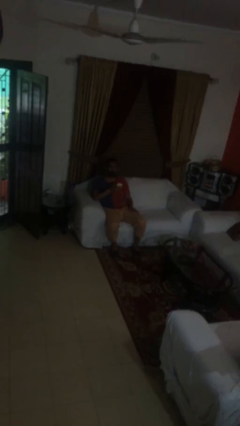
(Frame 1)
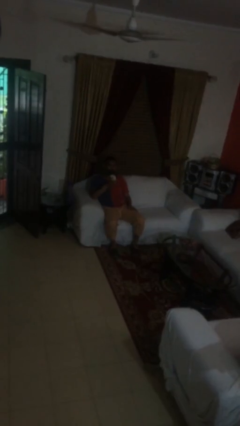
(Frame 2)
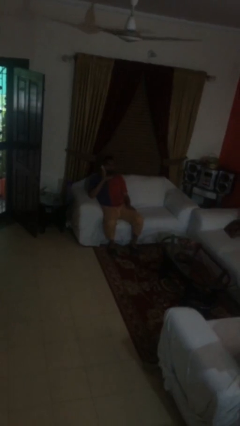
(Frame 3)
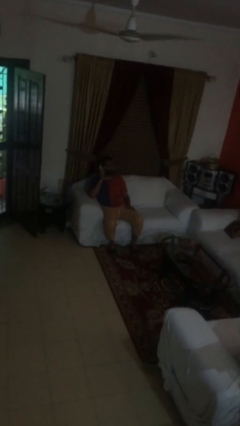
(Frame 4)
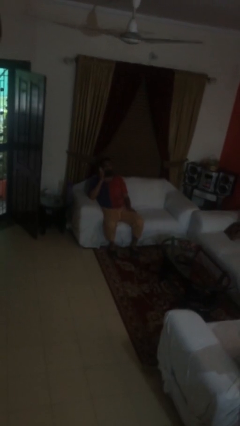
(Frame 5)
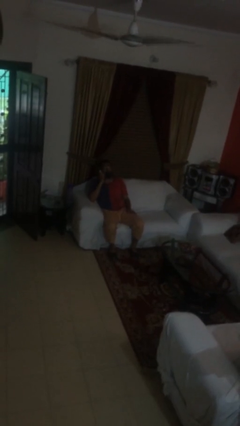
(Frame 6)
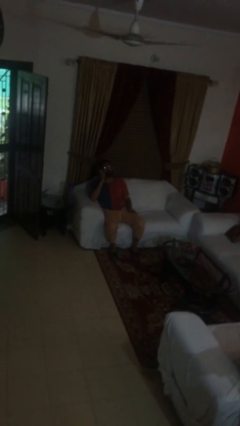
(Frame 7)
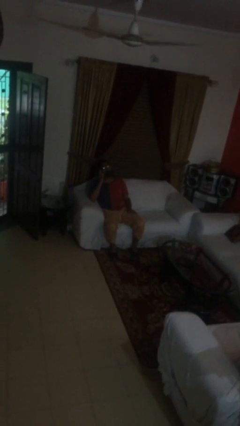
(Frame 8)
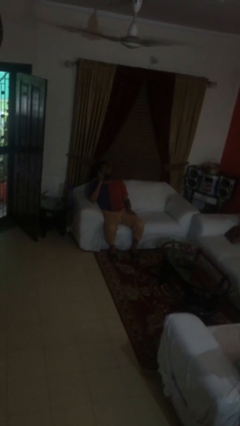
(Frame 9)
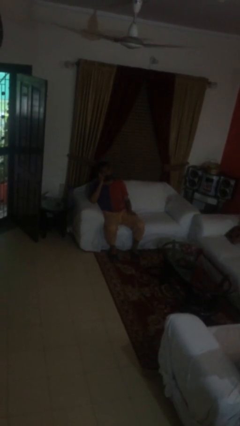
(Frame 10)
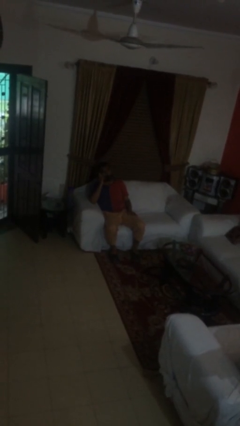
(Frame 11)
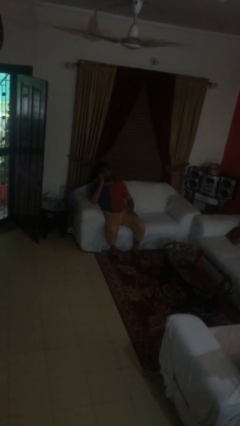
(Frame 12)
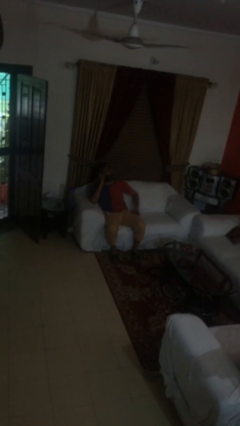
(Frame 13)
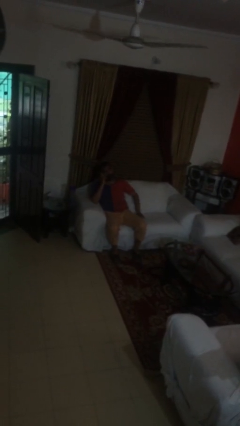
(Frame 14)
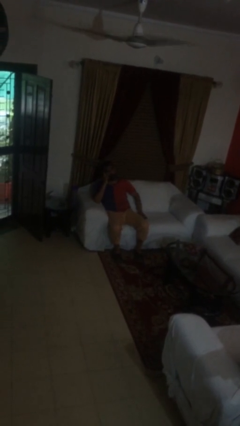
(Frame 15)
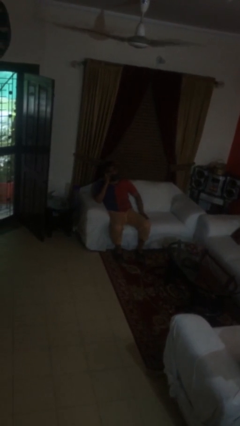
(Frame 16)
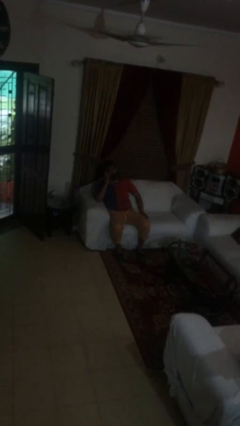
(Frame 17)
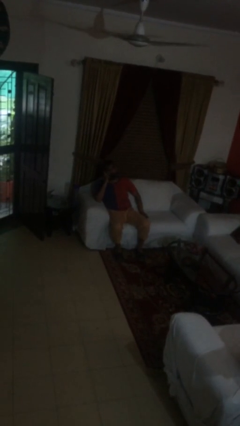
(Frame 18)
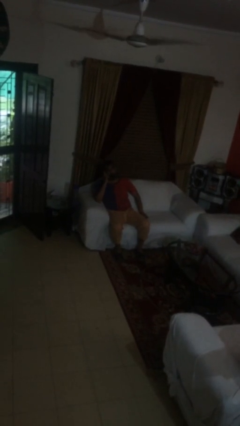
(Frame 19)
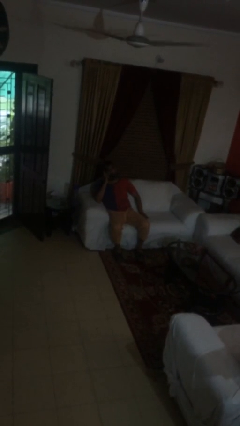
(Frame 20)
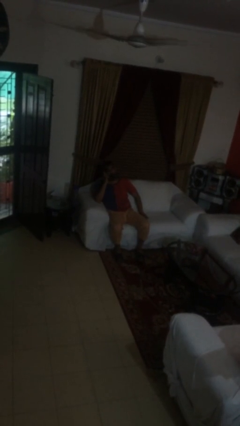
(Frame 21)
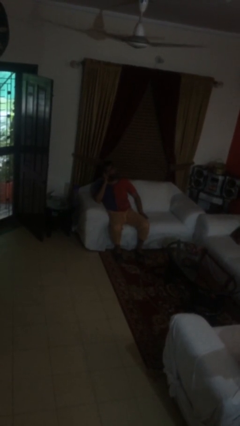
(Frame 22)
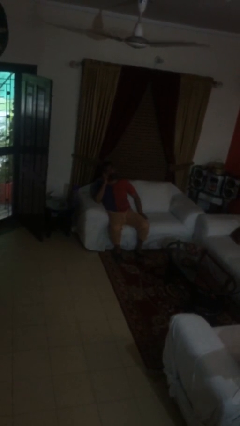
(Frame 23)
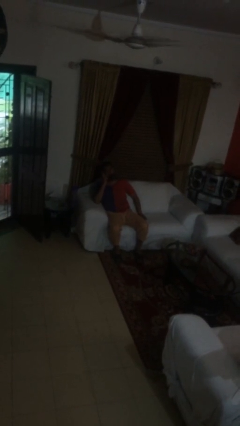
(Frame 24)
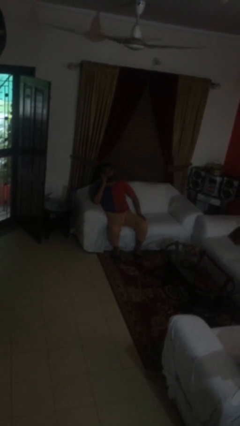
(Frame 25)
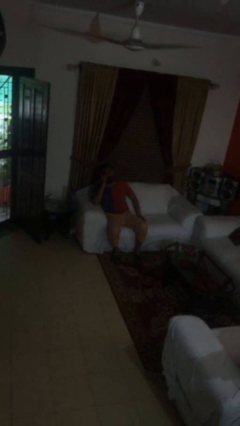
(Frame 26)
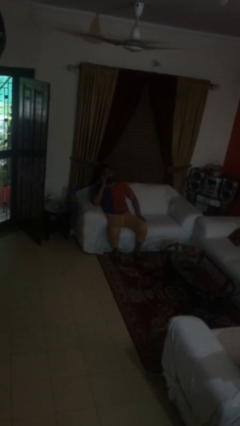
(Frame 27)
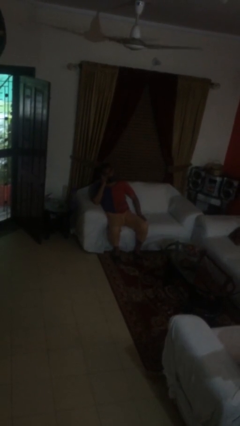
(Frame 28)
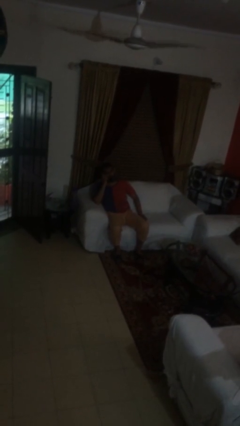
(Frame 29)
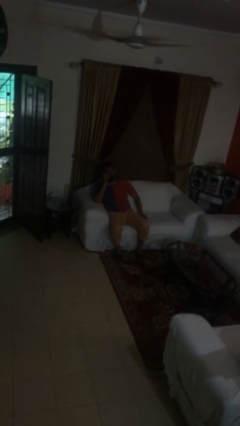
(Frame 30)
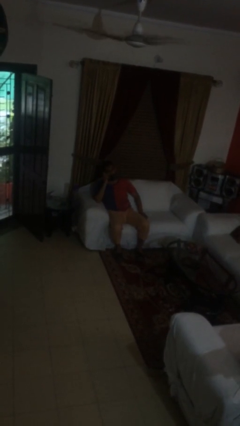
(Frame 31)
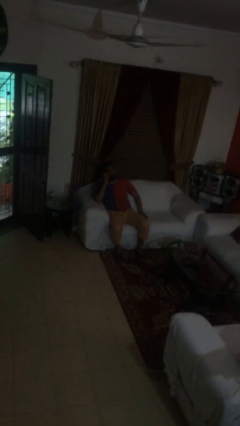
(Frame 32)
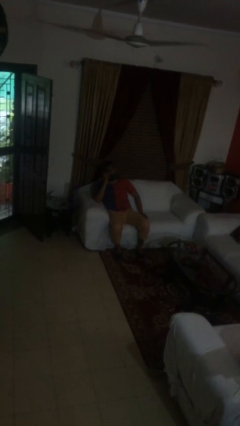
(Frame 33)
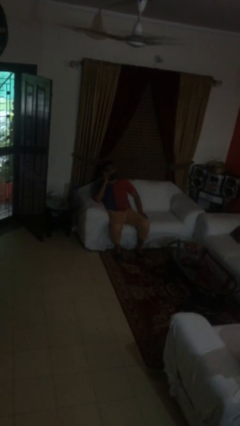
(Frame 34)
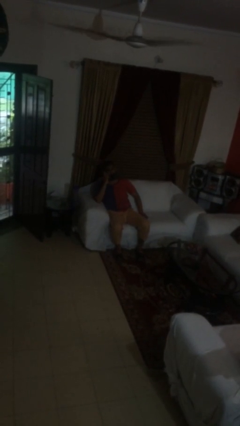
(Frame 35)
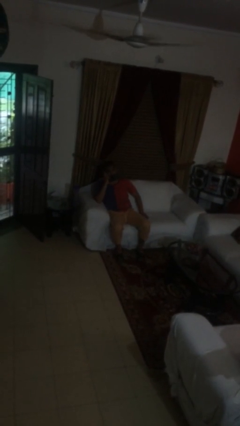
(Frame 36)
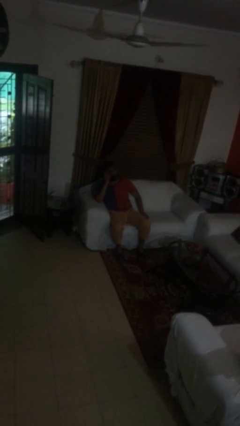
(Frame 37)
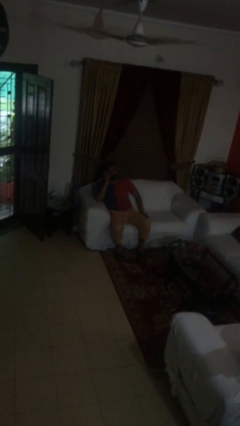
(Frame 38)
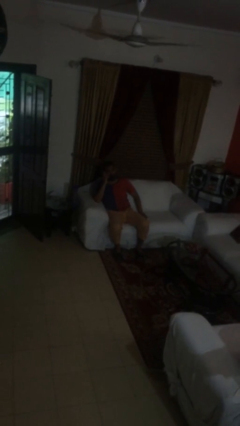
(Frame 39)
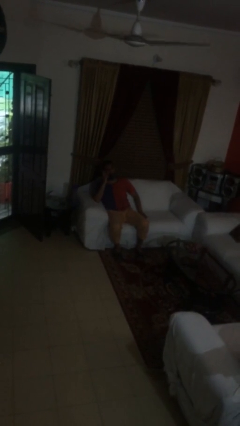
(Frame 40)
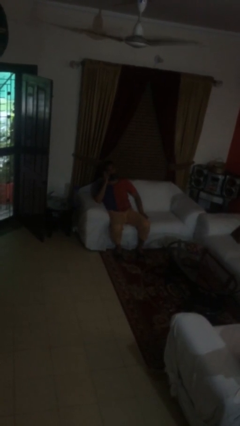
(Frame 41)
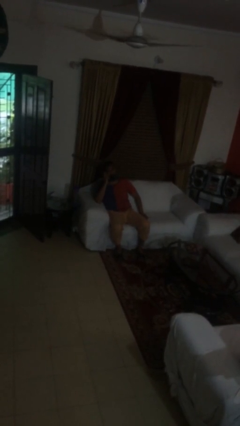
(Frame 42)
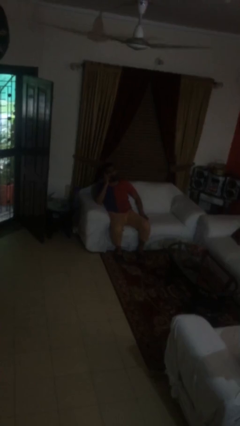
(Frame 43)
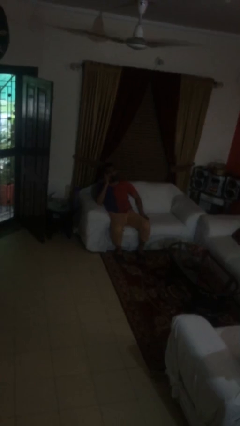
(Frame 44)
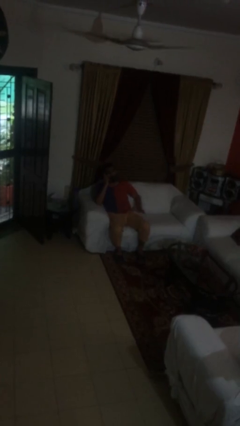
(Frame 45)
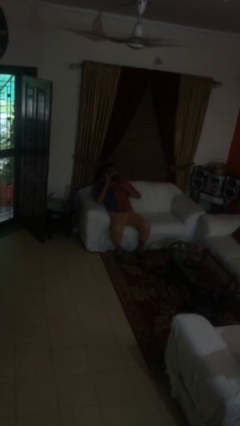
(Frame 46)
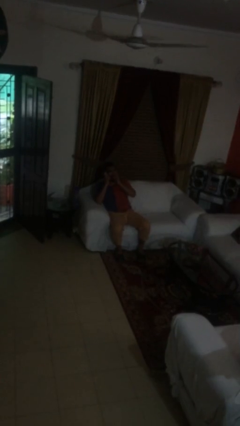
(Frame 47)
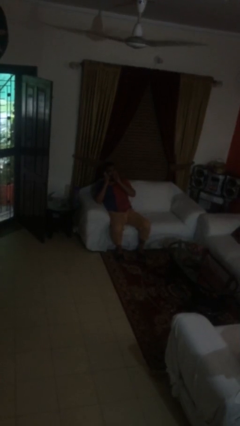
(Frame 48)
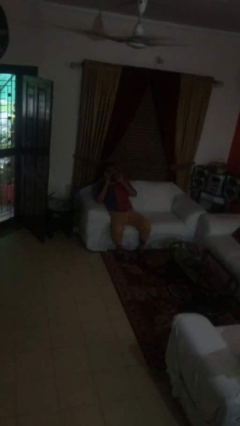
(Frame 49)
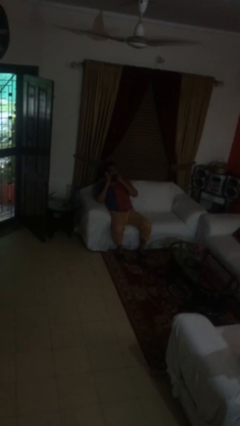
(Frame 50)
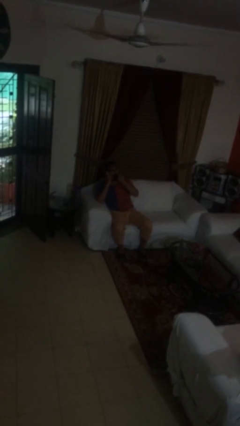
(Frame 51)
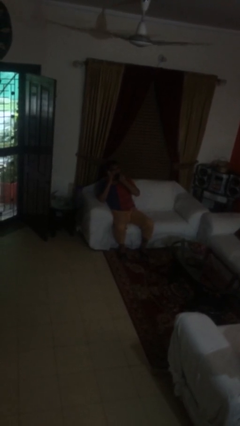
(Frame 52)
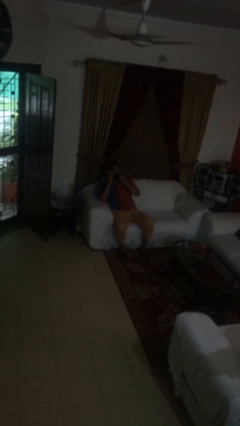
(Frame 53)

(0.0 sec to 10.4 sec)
person talks on phone

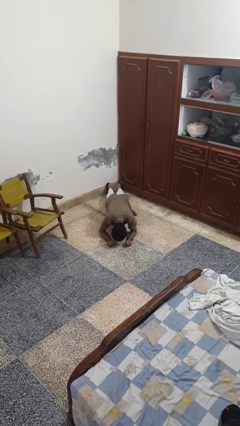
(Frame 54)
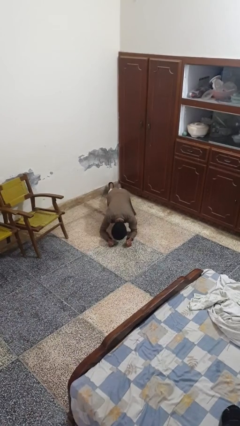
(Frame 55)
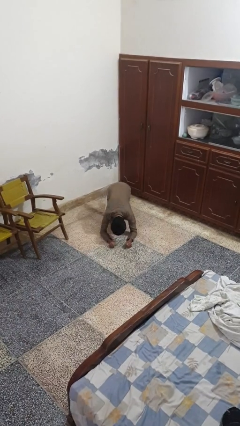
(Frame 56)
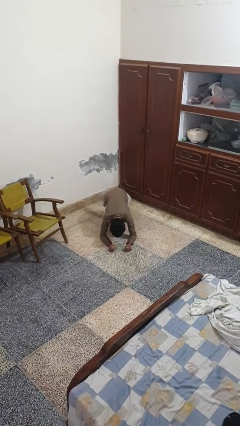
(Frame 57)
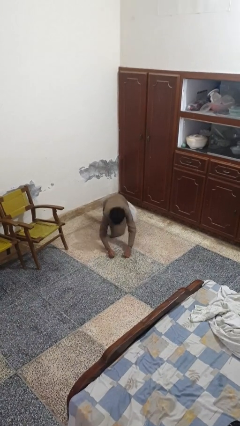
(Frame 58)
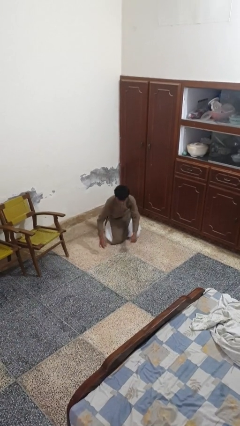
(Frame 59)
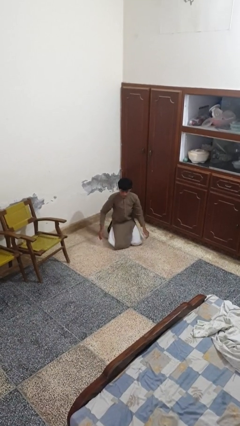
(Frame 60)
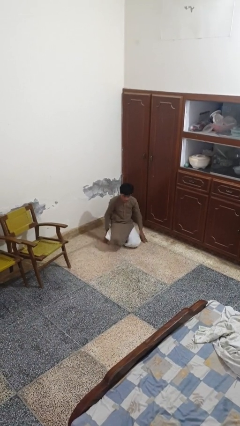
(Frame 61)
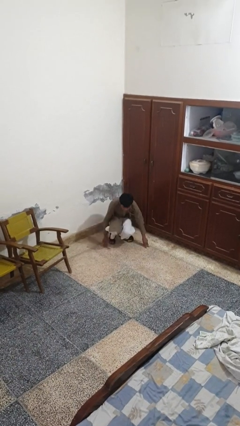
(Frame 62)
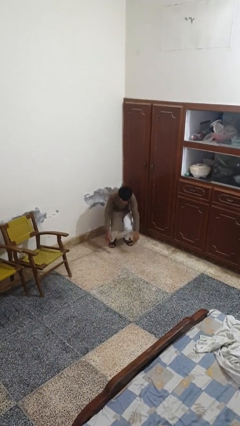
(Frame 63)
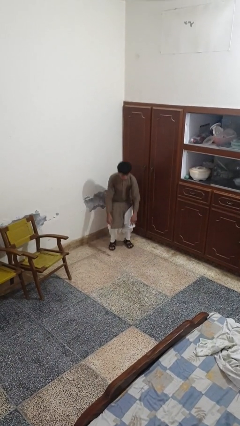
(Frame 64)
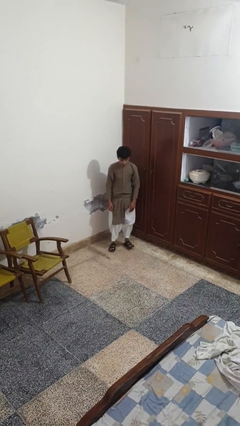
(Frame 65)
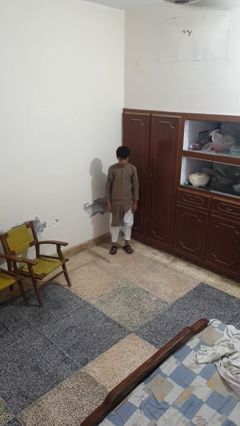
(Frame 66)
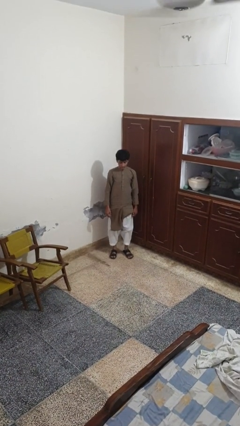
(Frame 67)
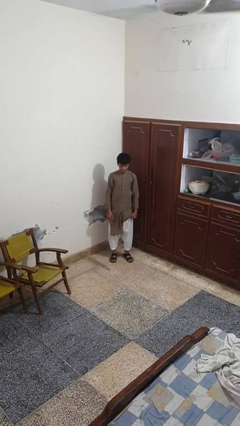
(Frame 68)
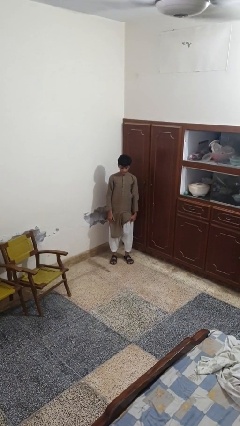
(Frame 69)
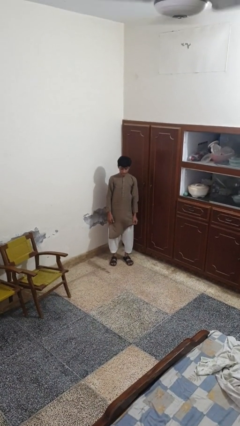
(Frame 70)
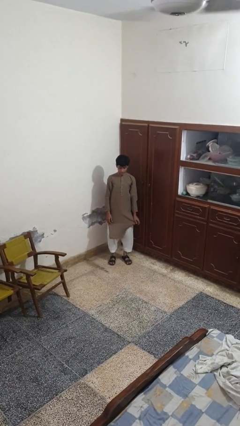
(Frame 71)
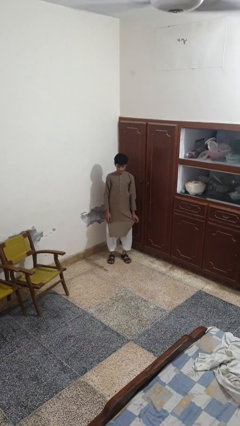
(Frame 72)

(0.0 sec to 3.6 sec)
person stands up from floor

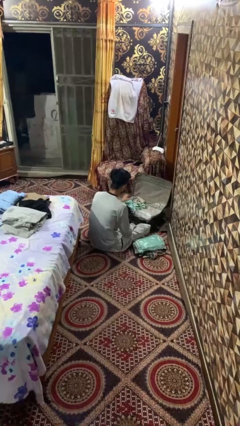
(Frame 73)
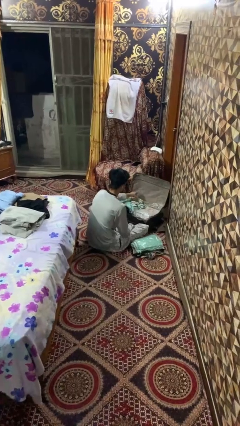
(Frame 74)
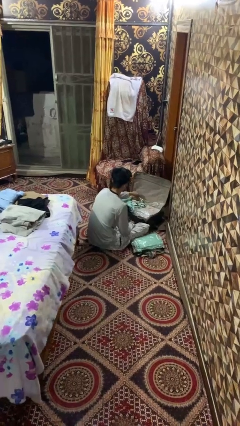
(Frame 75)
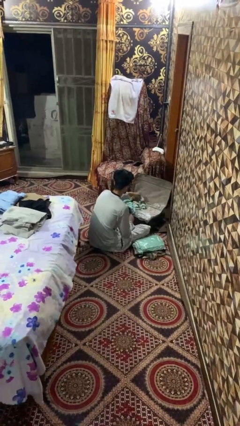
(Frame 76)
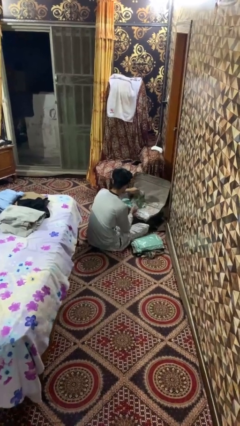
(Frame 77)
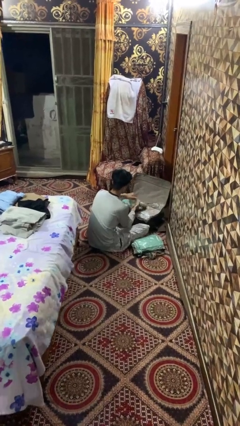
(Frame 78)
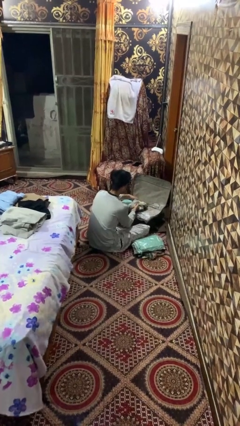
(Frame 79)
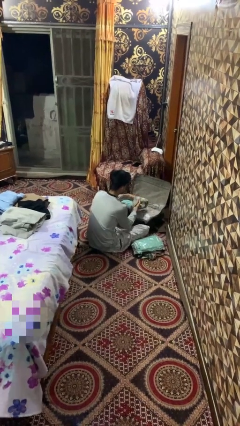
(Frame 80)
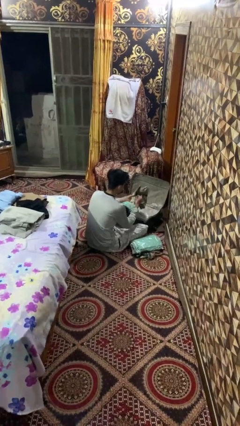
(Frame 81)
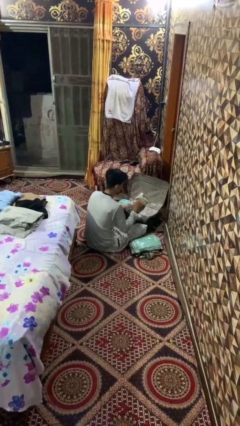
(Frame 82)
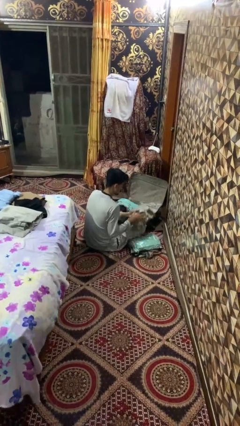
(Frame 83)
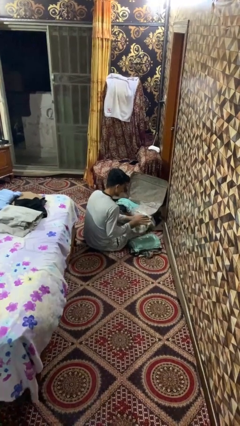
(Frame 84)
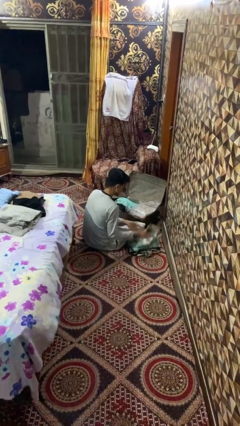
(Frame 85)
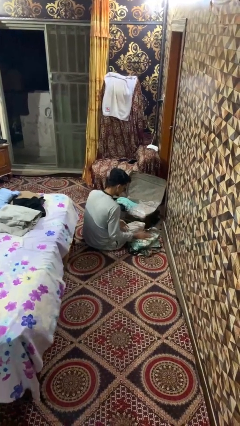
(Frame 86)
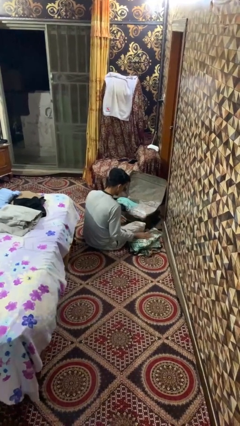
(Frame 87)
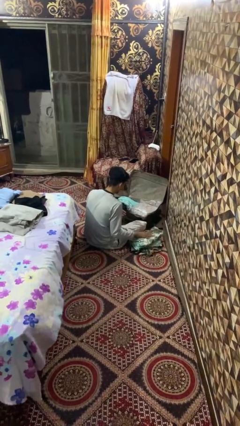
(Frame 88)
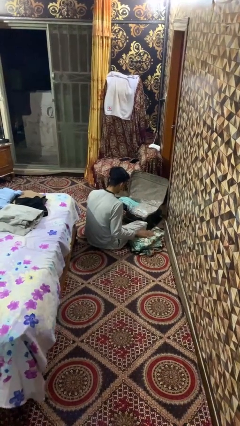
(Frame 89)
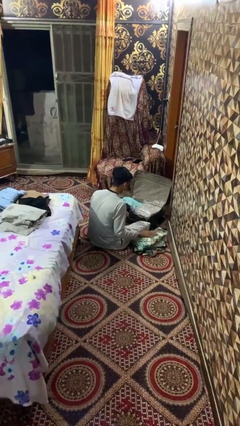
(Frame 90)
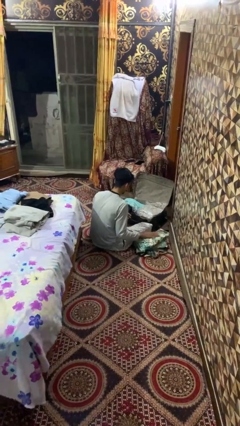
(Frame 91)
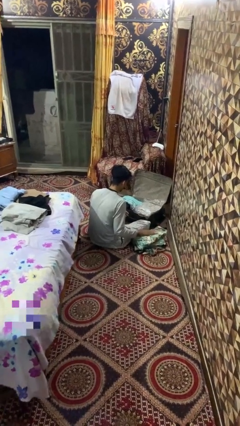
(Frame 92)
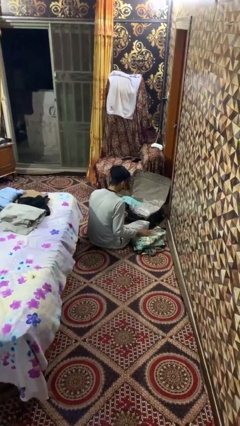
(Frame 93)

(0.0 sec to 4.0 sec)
person unloads clothes from suitcase

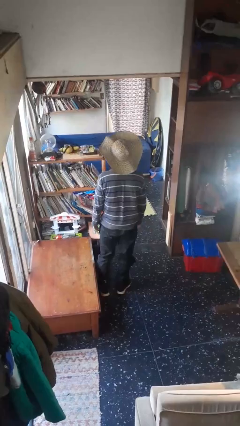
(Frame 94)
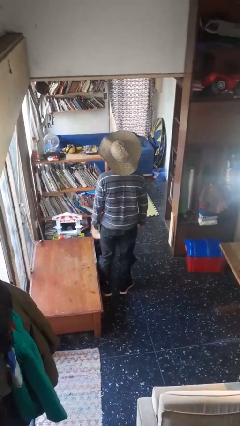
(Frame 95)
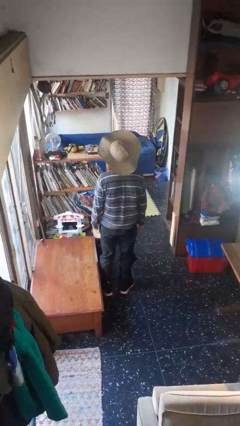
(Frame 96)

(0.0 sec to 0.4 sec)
person takes off hat
